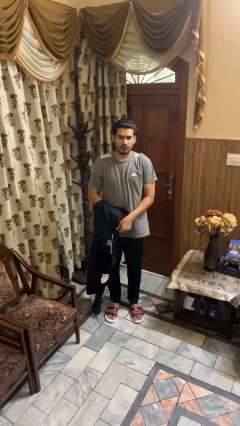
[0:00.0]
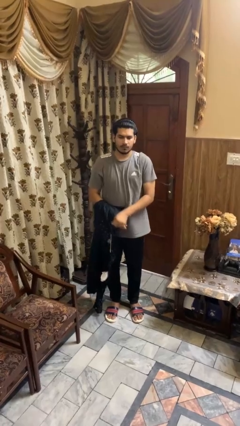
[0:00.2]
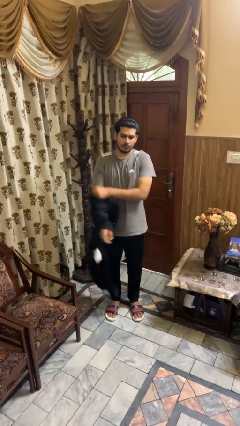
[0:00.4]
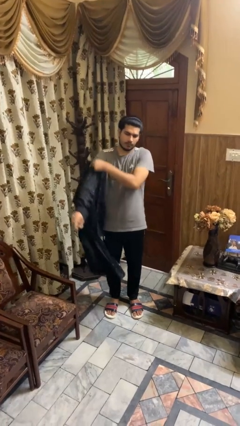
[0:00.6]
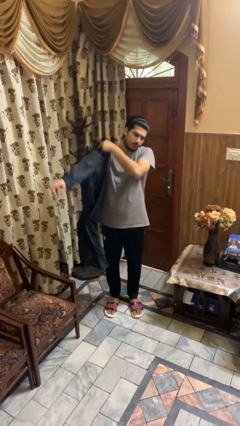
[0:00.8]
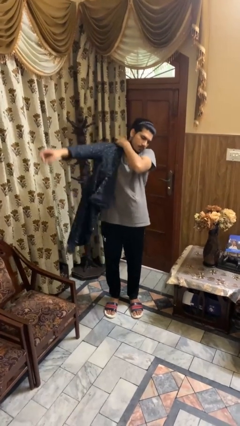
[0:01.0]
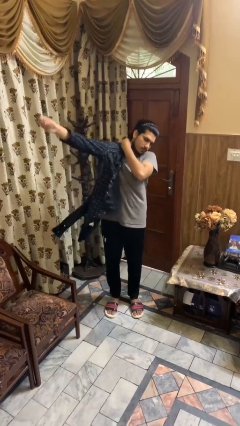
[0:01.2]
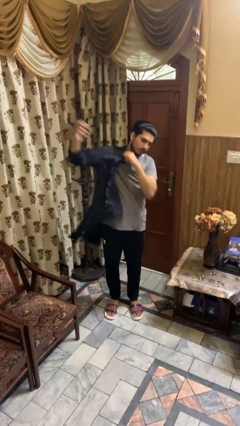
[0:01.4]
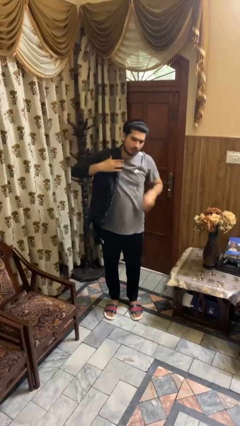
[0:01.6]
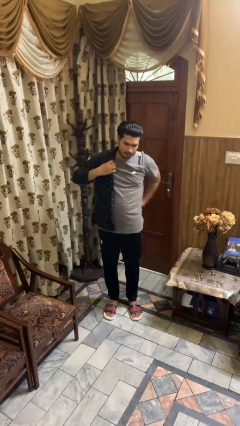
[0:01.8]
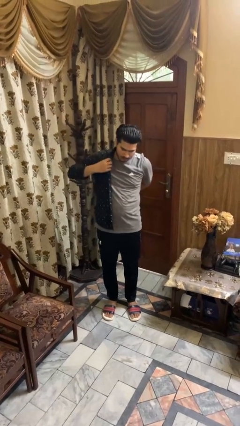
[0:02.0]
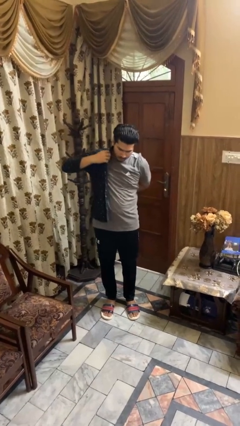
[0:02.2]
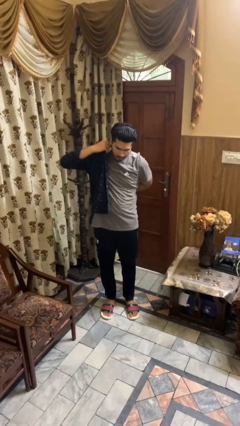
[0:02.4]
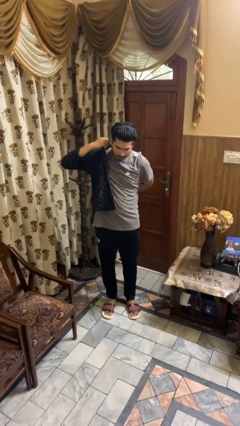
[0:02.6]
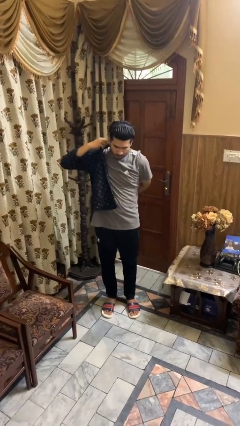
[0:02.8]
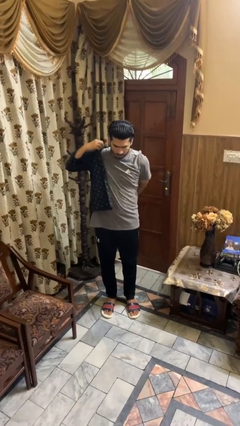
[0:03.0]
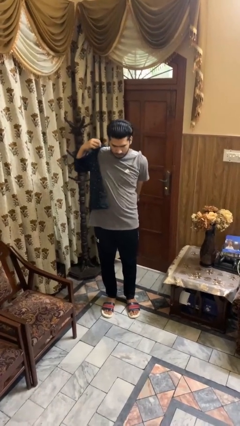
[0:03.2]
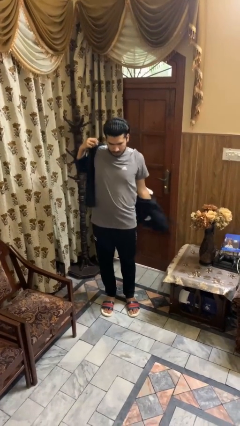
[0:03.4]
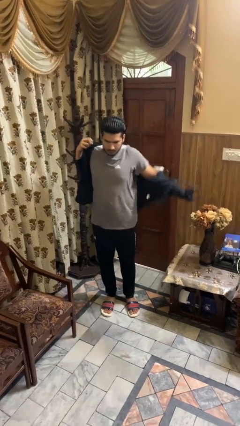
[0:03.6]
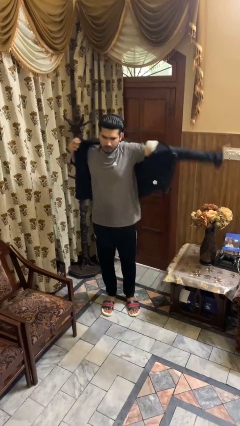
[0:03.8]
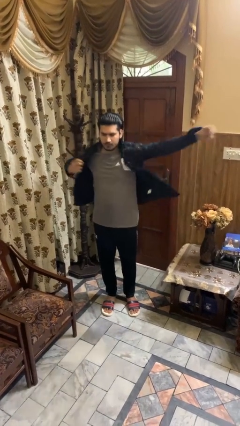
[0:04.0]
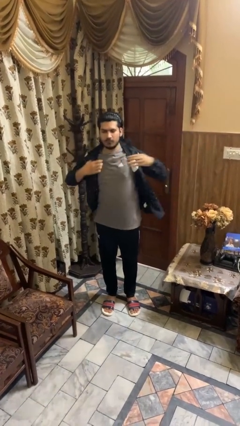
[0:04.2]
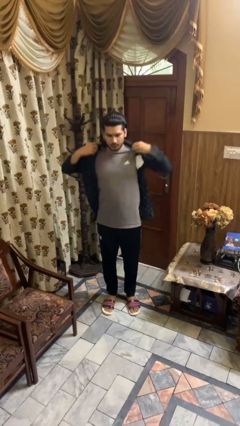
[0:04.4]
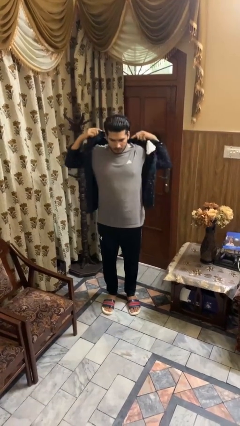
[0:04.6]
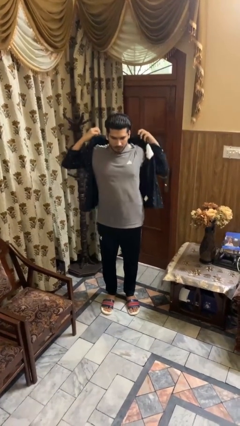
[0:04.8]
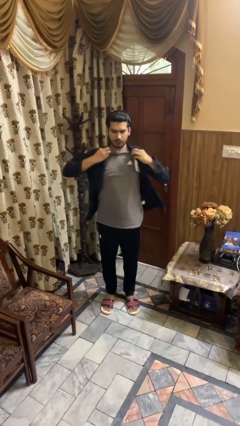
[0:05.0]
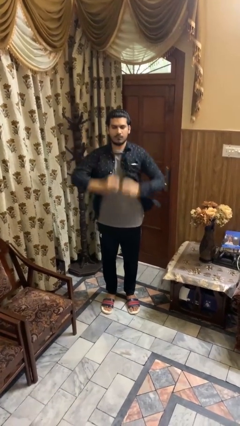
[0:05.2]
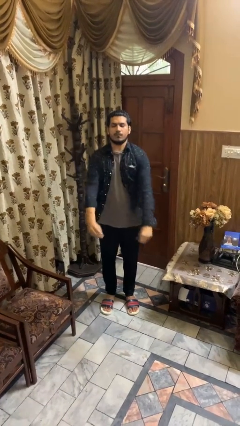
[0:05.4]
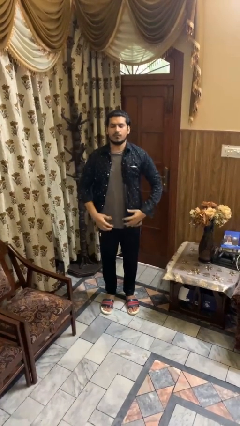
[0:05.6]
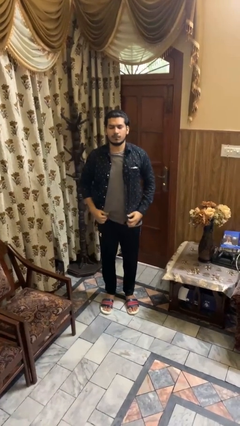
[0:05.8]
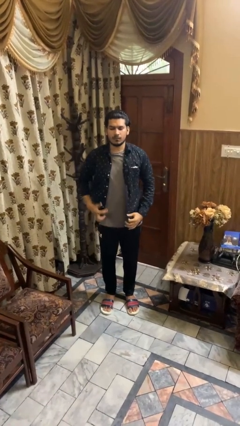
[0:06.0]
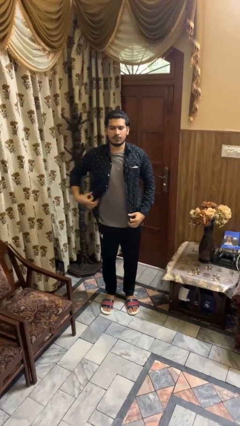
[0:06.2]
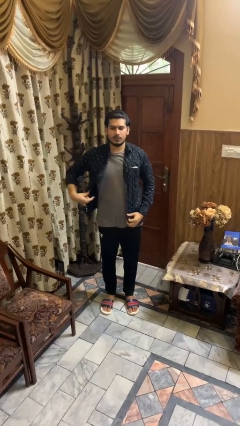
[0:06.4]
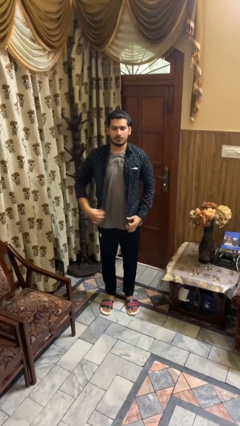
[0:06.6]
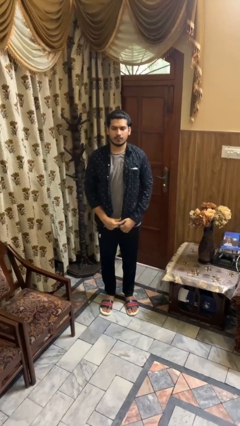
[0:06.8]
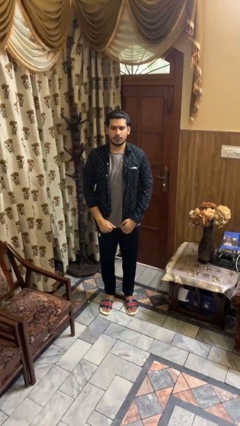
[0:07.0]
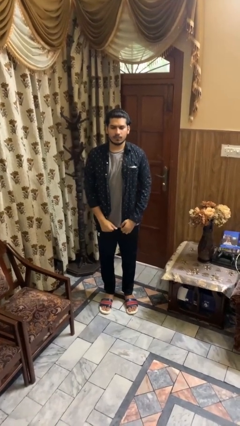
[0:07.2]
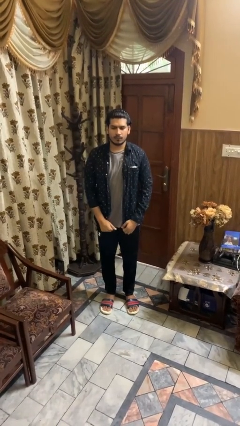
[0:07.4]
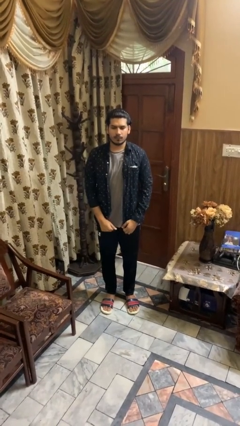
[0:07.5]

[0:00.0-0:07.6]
person puts on shirt

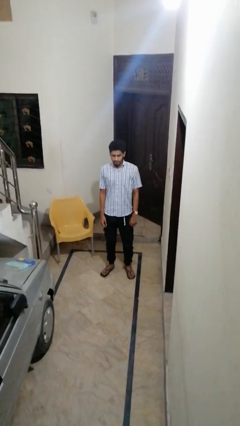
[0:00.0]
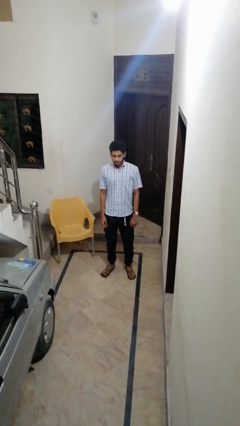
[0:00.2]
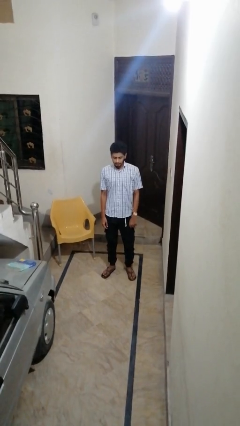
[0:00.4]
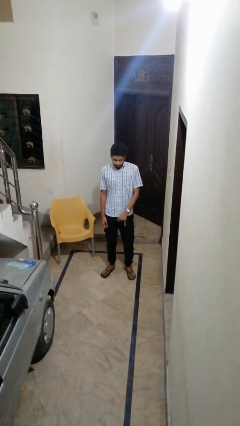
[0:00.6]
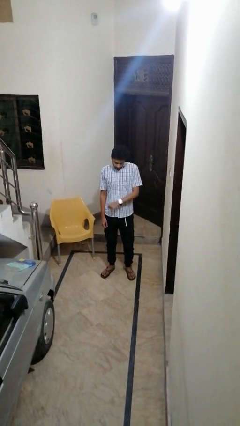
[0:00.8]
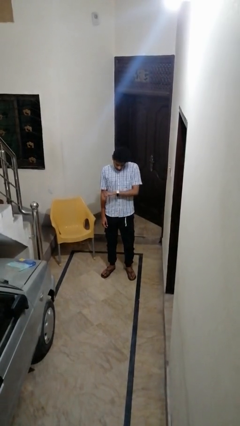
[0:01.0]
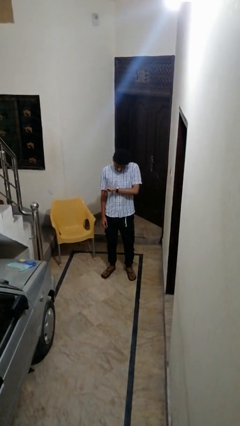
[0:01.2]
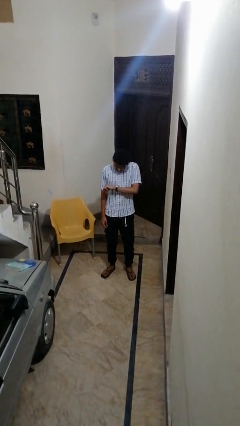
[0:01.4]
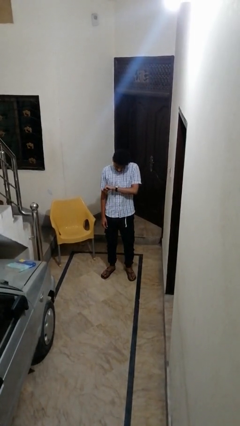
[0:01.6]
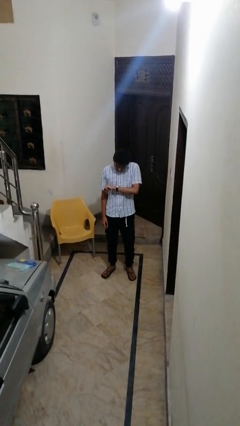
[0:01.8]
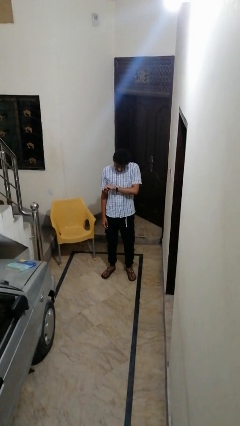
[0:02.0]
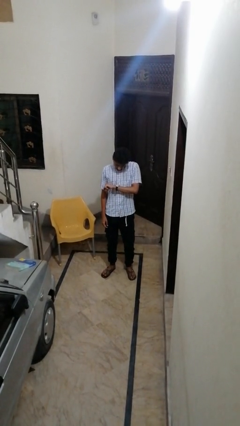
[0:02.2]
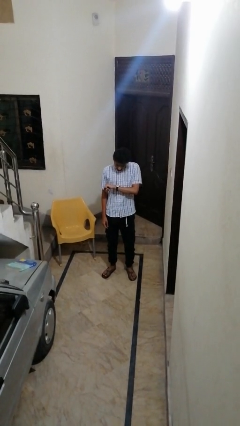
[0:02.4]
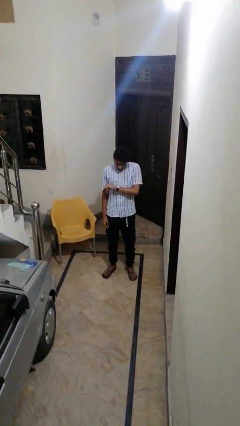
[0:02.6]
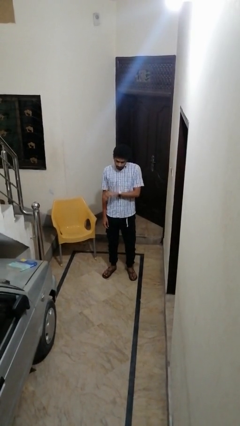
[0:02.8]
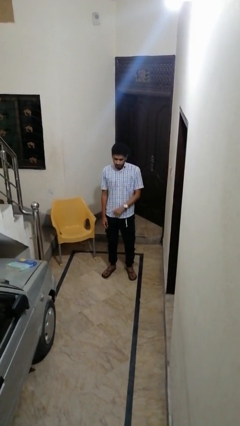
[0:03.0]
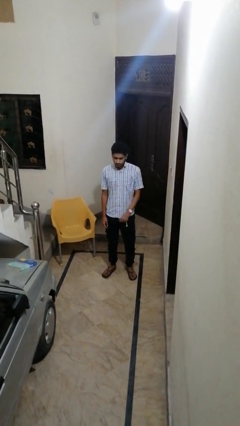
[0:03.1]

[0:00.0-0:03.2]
person looks at wristwatch

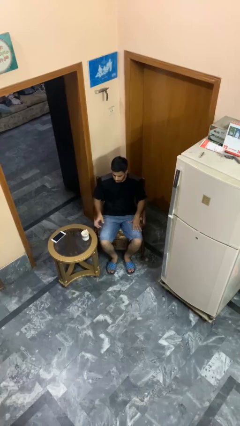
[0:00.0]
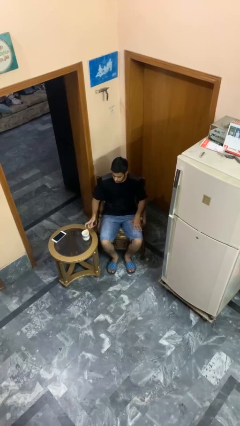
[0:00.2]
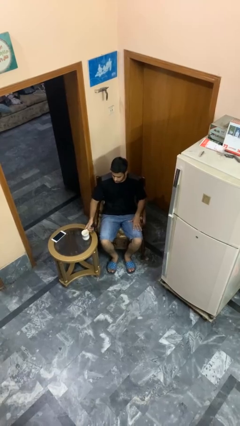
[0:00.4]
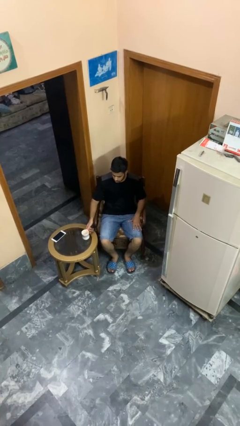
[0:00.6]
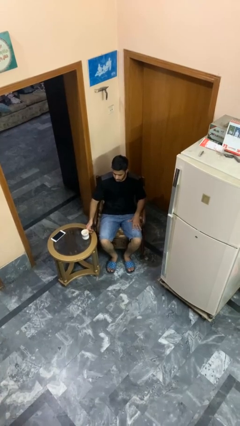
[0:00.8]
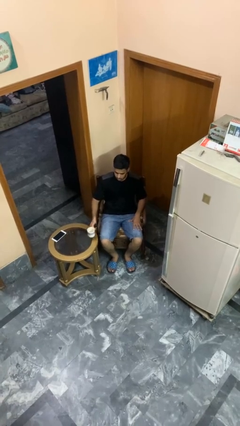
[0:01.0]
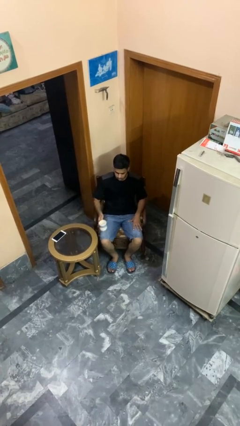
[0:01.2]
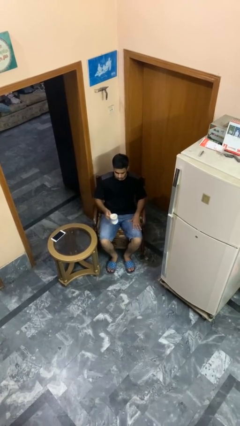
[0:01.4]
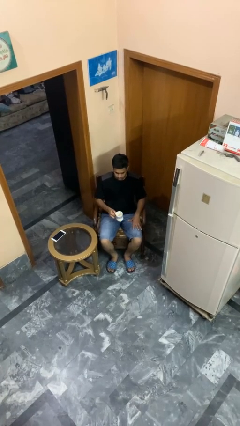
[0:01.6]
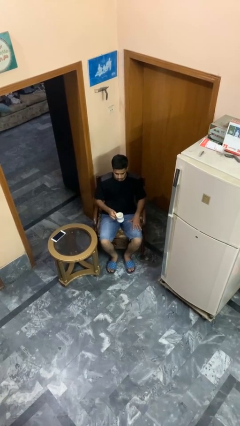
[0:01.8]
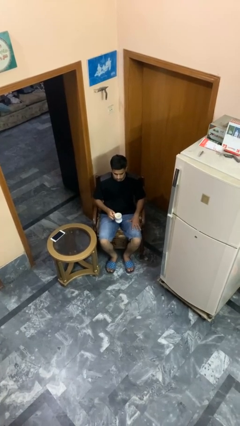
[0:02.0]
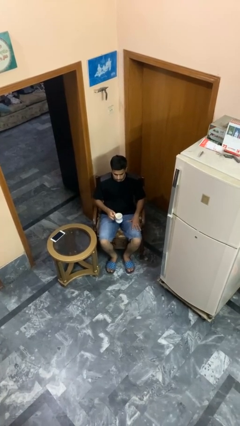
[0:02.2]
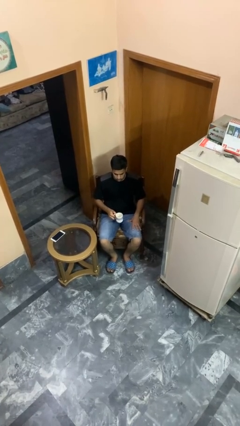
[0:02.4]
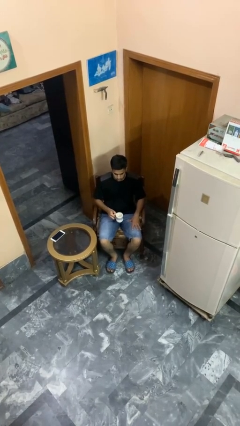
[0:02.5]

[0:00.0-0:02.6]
person picks up object from table

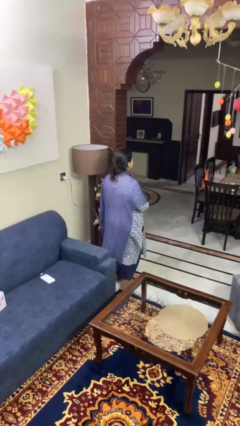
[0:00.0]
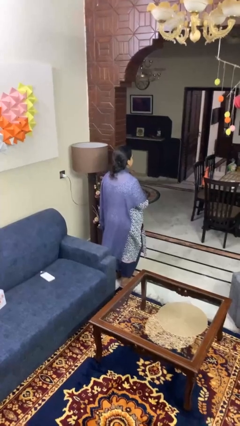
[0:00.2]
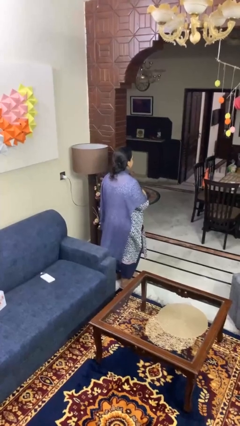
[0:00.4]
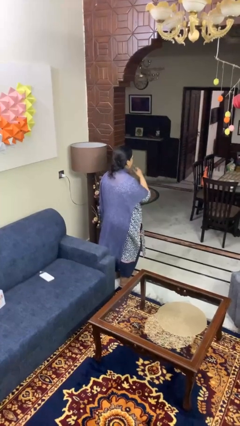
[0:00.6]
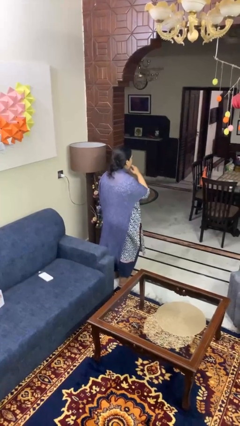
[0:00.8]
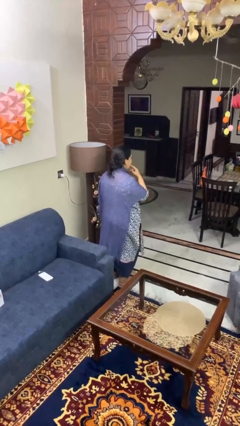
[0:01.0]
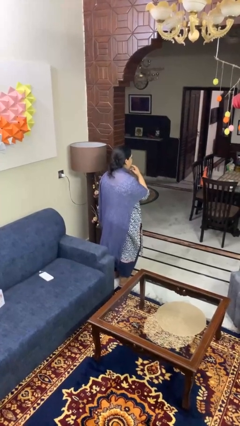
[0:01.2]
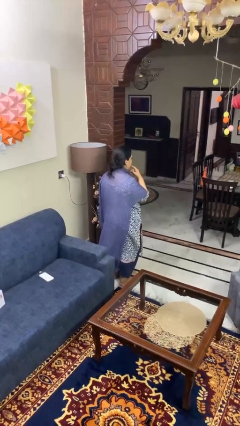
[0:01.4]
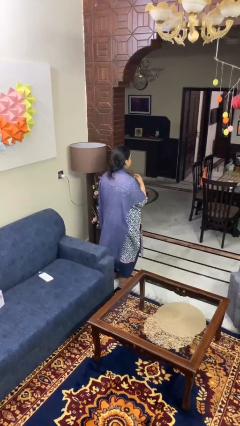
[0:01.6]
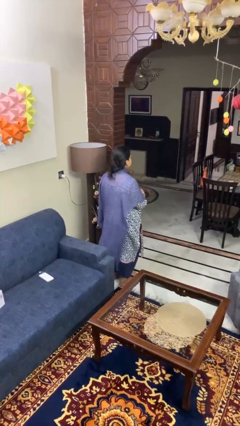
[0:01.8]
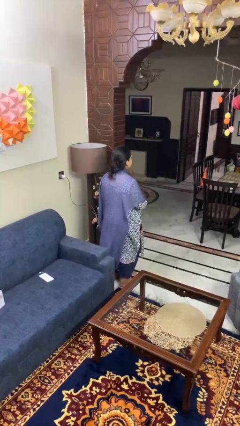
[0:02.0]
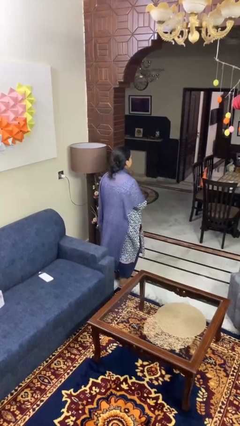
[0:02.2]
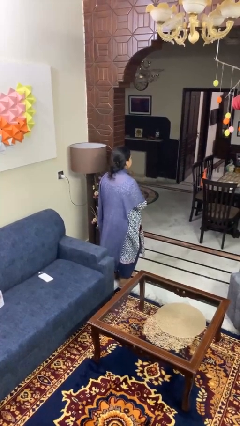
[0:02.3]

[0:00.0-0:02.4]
person licks fingers

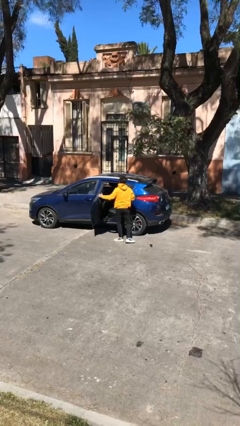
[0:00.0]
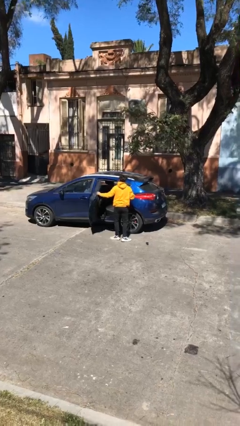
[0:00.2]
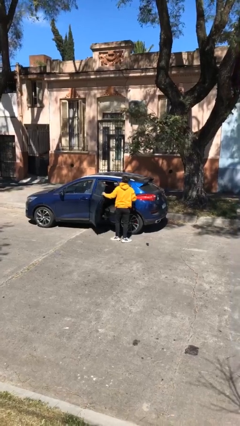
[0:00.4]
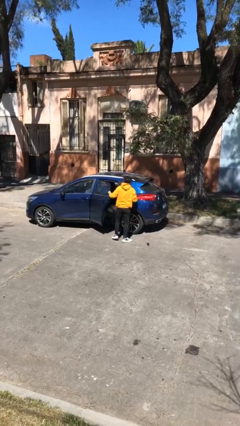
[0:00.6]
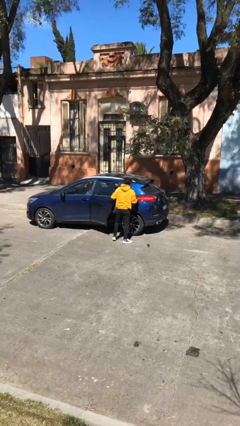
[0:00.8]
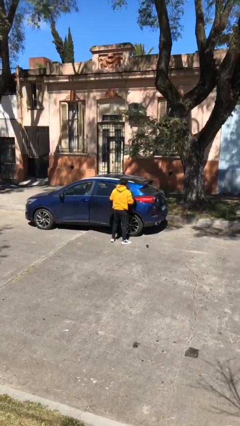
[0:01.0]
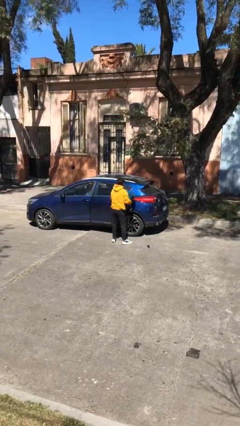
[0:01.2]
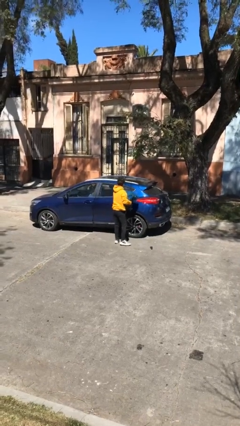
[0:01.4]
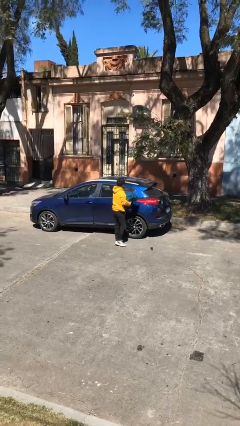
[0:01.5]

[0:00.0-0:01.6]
person closes car door
